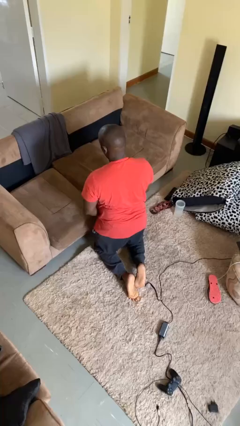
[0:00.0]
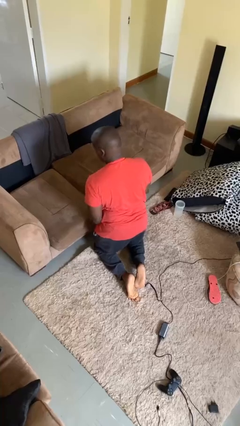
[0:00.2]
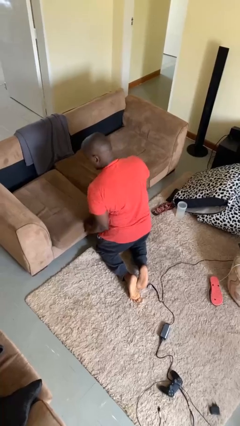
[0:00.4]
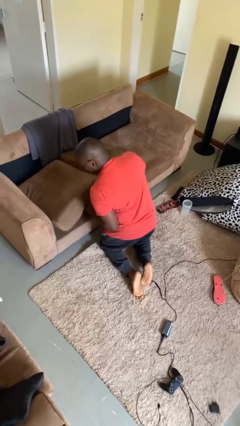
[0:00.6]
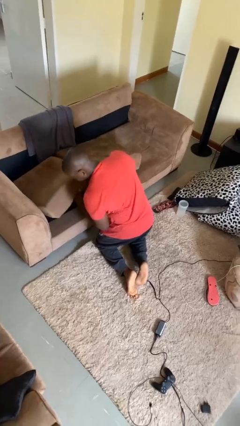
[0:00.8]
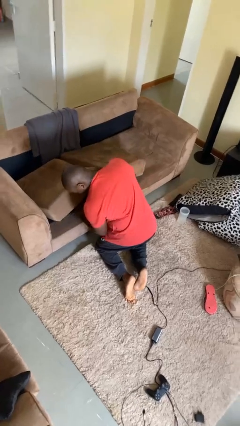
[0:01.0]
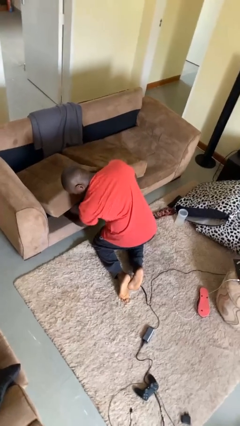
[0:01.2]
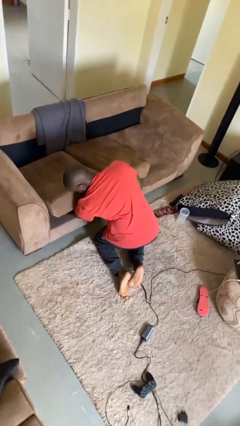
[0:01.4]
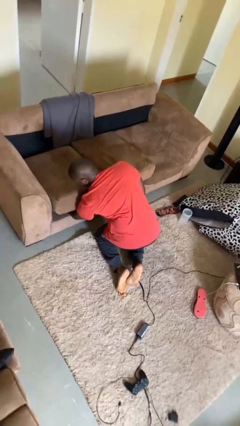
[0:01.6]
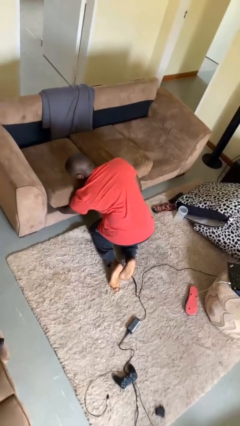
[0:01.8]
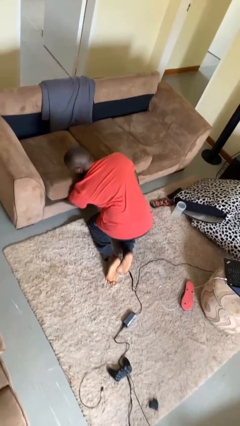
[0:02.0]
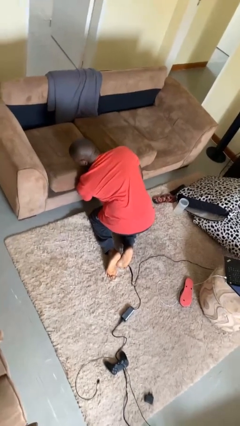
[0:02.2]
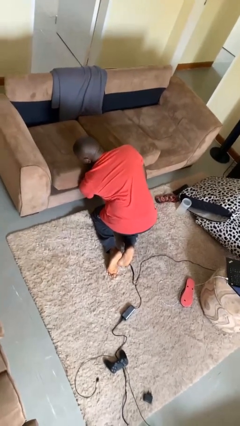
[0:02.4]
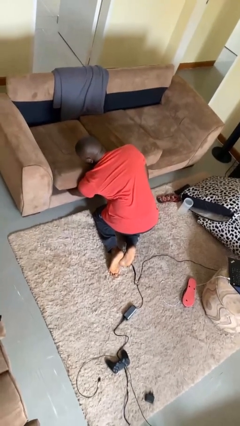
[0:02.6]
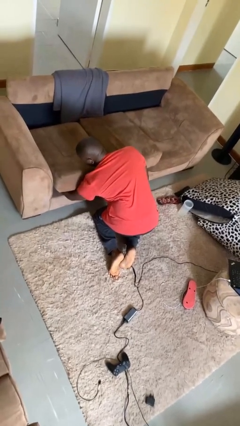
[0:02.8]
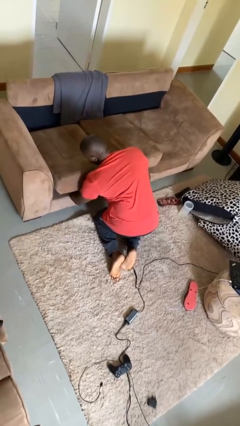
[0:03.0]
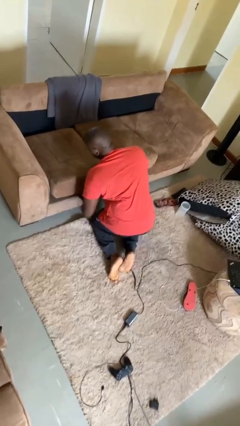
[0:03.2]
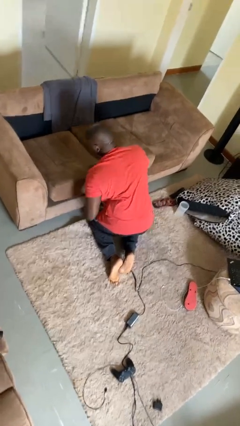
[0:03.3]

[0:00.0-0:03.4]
person searches under couch

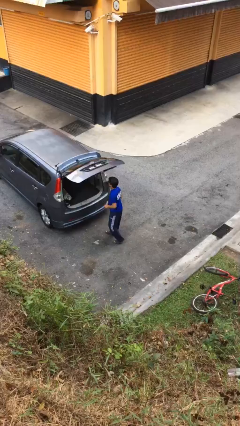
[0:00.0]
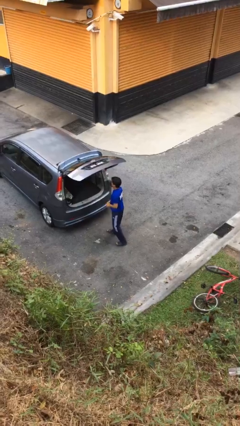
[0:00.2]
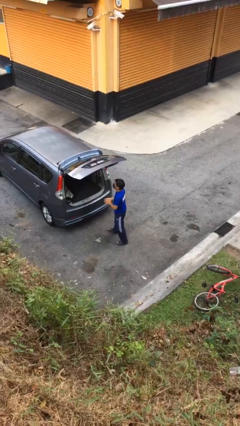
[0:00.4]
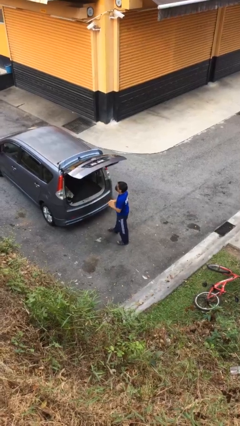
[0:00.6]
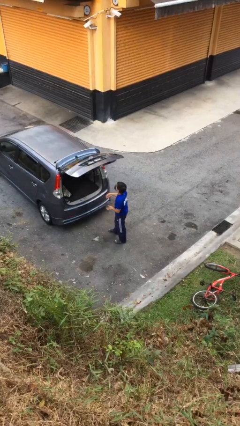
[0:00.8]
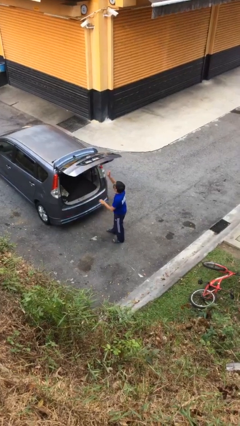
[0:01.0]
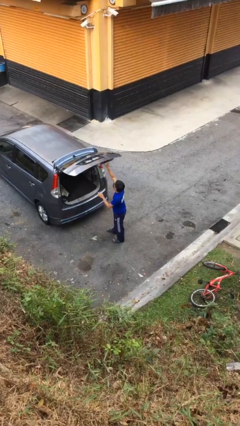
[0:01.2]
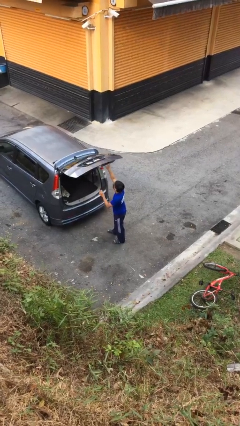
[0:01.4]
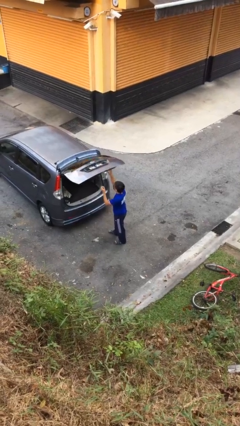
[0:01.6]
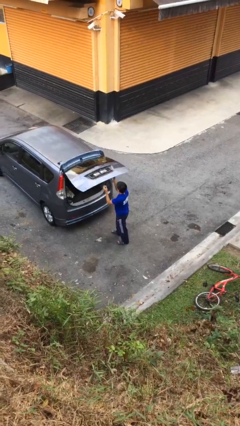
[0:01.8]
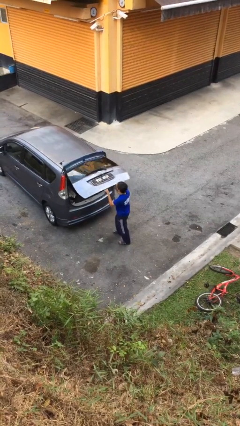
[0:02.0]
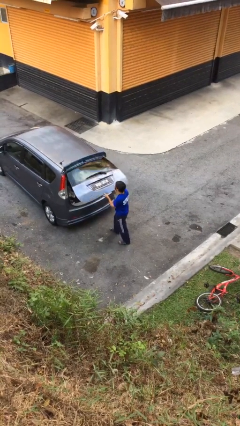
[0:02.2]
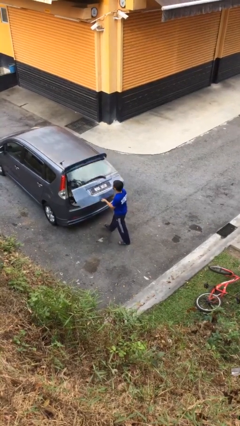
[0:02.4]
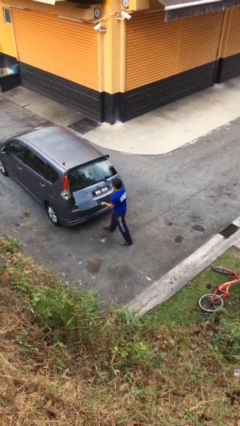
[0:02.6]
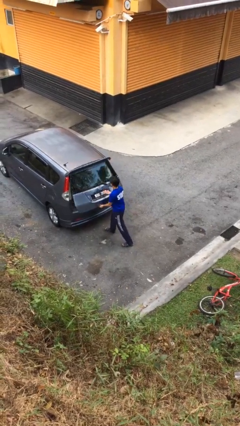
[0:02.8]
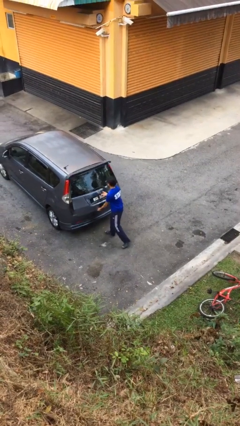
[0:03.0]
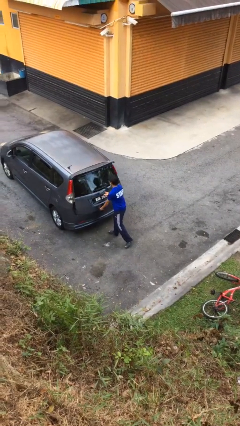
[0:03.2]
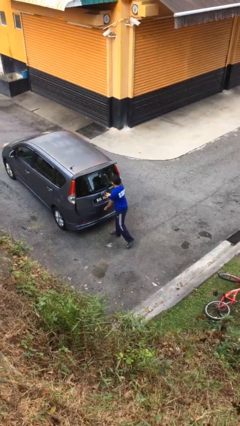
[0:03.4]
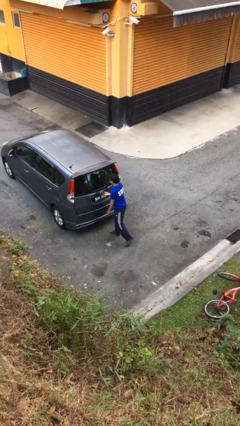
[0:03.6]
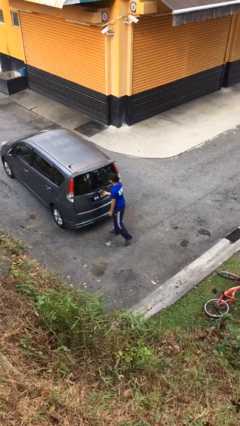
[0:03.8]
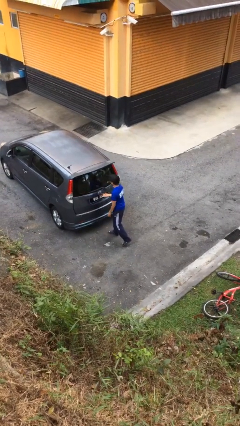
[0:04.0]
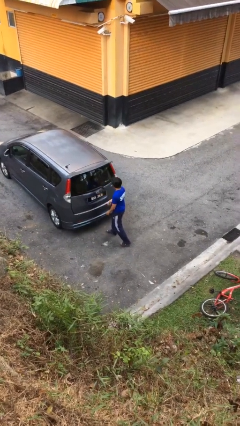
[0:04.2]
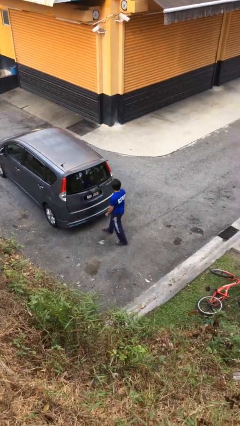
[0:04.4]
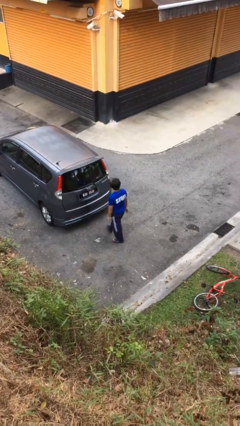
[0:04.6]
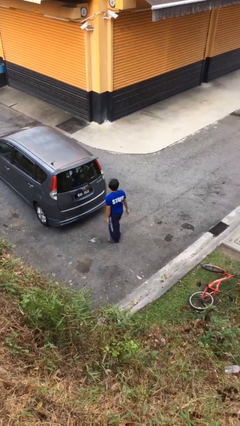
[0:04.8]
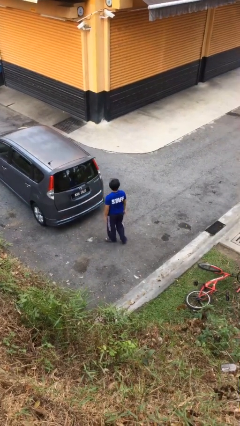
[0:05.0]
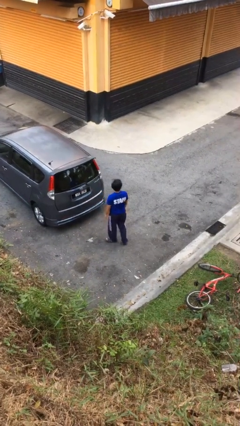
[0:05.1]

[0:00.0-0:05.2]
person closes car trunk

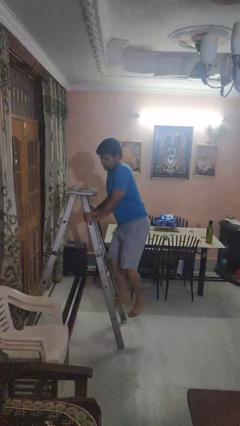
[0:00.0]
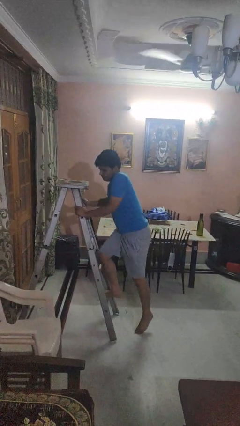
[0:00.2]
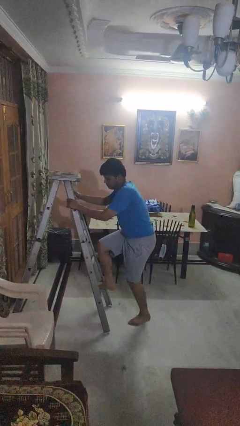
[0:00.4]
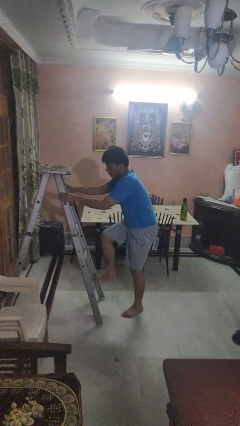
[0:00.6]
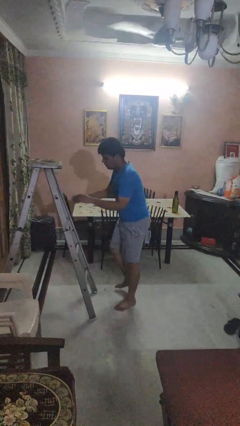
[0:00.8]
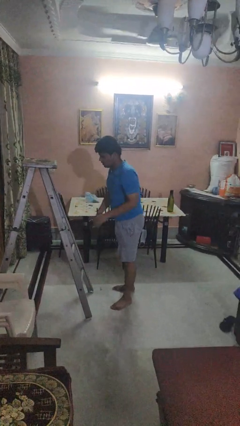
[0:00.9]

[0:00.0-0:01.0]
person climbs down ladder

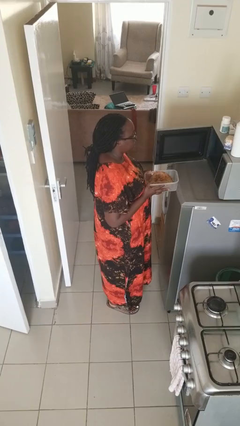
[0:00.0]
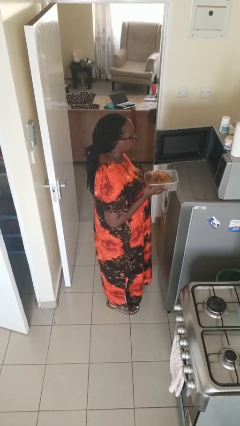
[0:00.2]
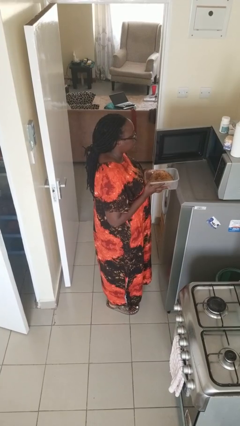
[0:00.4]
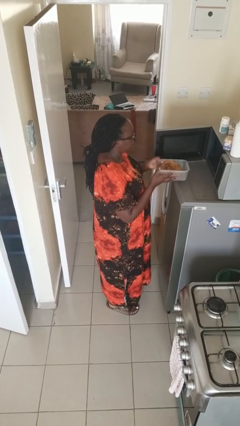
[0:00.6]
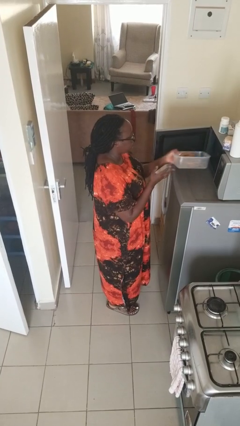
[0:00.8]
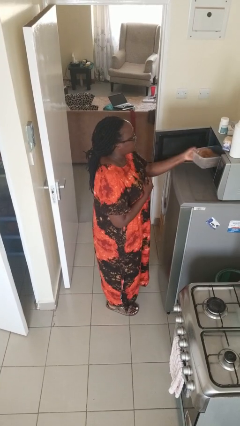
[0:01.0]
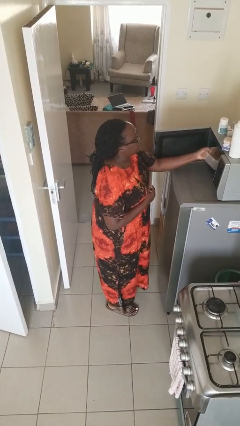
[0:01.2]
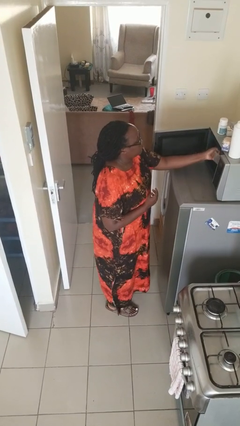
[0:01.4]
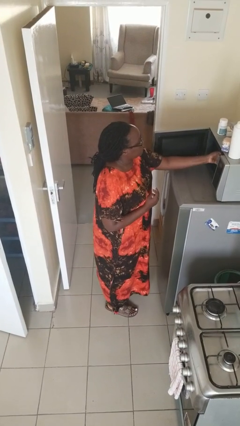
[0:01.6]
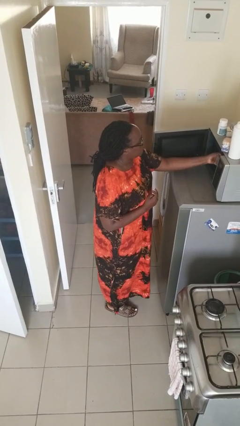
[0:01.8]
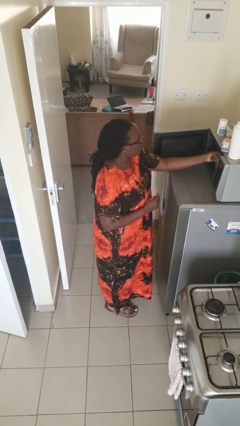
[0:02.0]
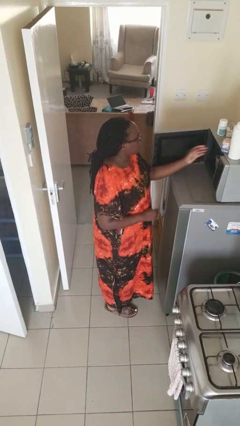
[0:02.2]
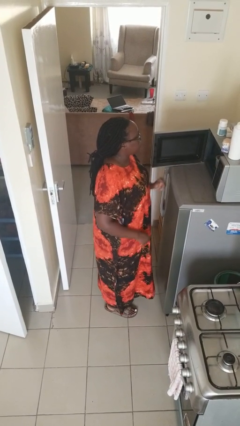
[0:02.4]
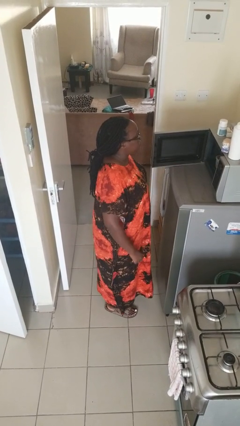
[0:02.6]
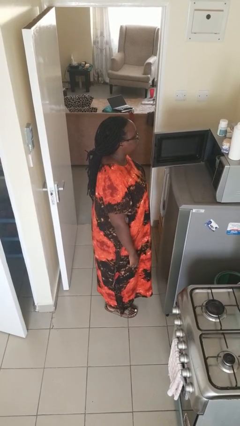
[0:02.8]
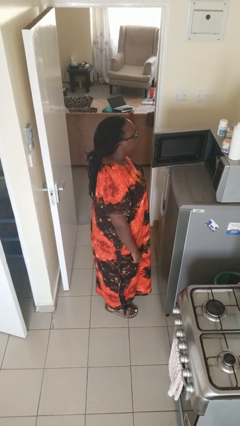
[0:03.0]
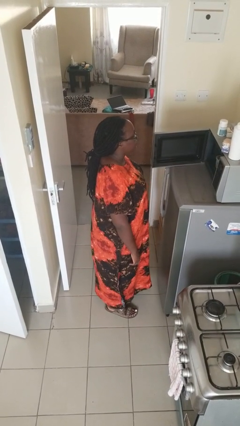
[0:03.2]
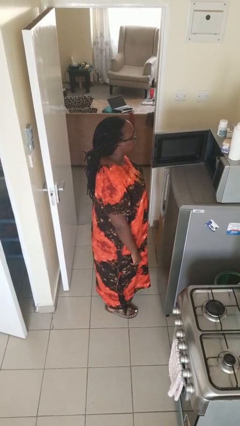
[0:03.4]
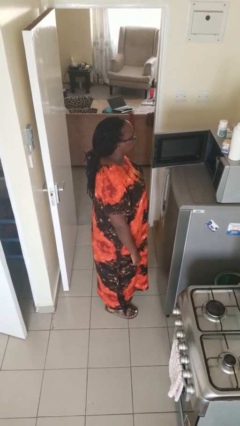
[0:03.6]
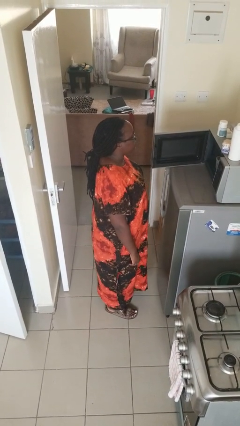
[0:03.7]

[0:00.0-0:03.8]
person puts object into microwave

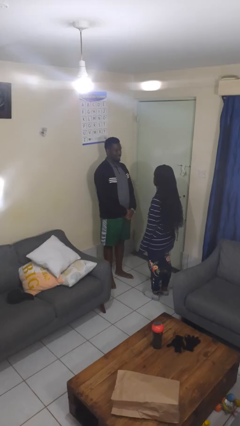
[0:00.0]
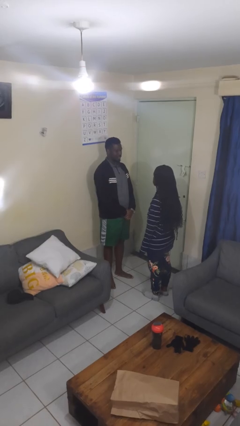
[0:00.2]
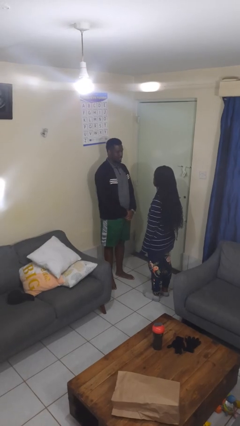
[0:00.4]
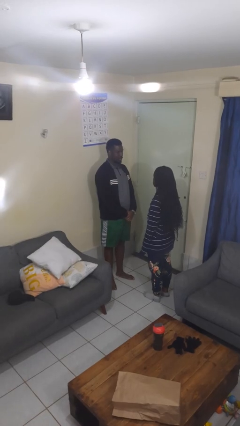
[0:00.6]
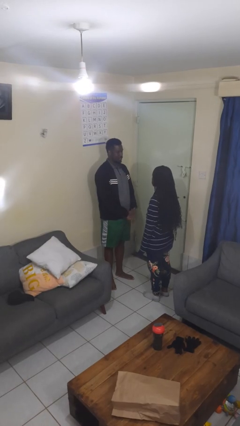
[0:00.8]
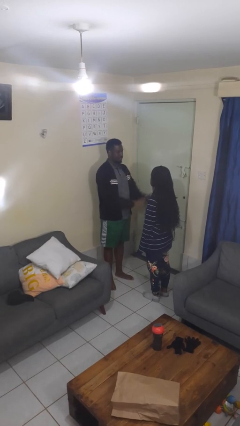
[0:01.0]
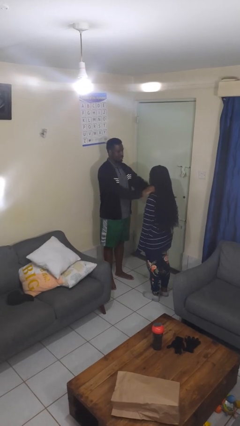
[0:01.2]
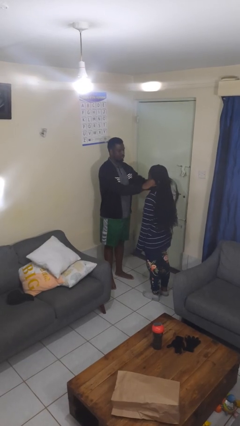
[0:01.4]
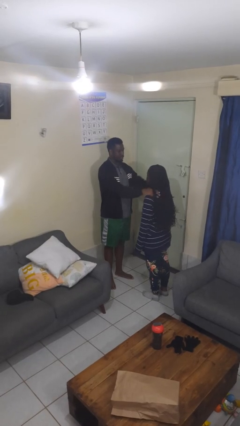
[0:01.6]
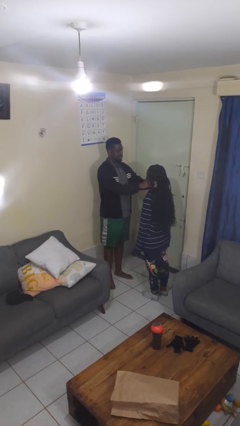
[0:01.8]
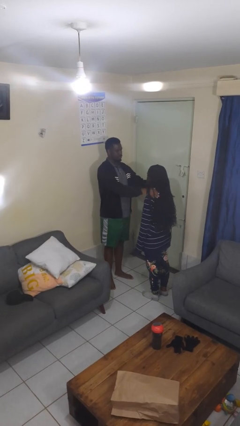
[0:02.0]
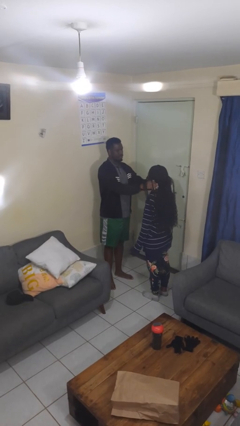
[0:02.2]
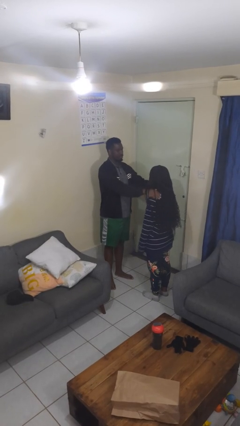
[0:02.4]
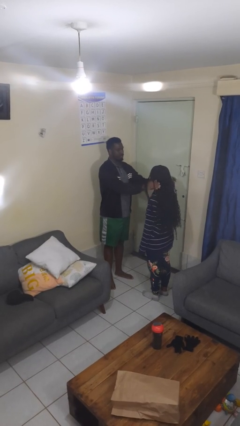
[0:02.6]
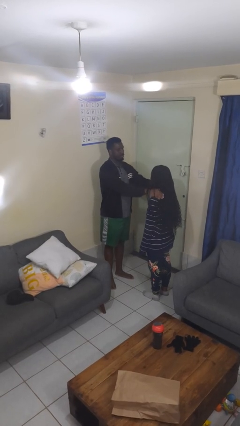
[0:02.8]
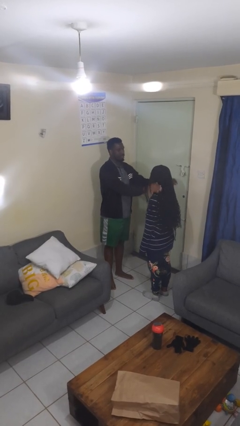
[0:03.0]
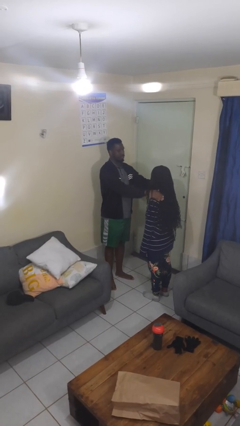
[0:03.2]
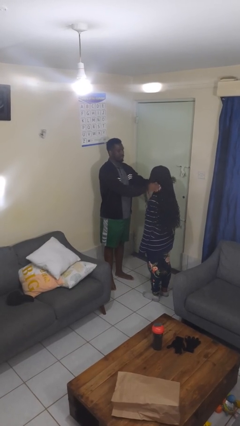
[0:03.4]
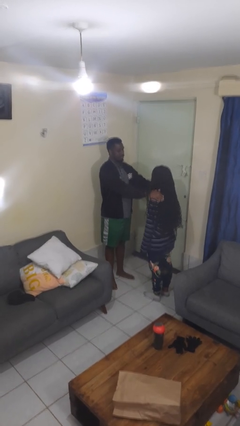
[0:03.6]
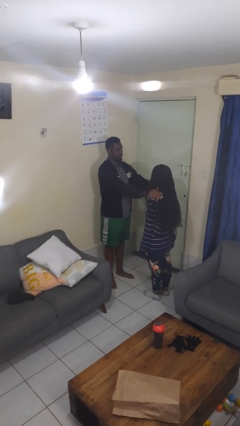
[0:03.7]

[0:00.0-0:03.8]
person pounds shoulders of person

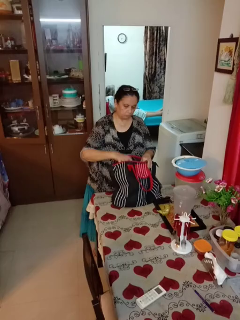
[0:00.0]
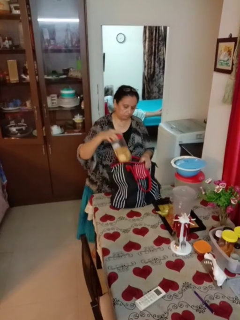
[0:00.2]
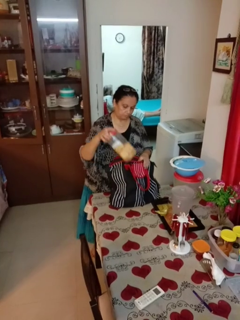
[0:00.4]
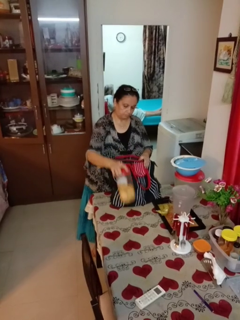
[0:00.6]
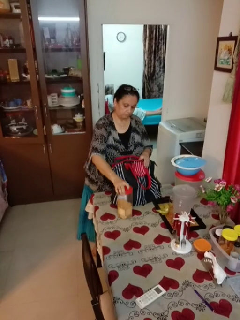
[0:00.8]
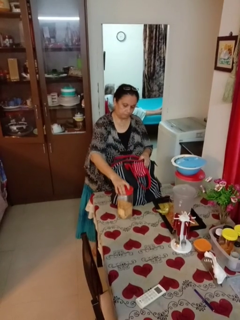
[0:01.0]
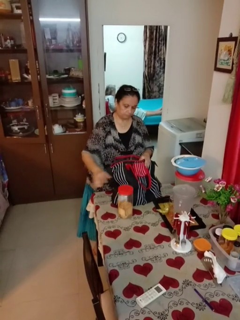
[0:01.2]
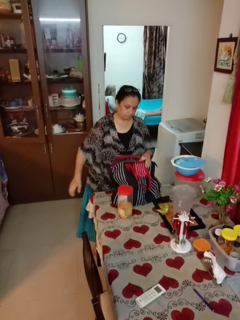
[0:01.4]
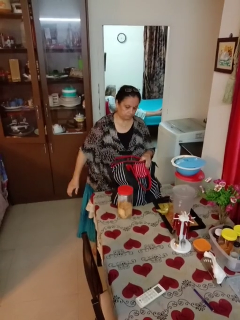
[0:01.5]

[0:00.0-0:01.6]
person takes object from bag
